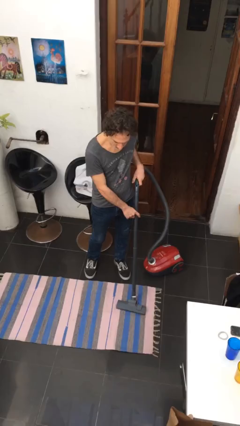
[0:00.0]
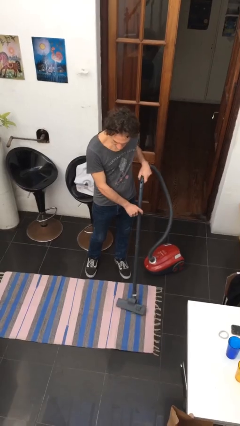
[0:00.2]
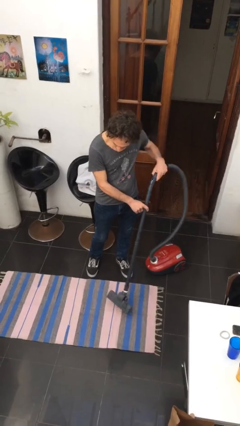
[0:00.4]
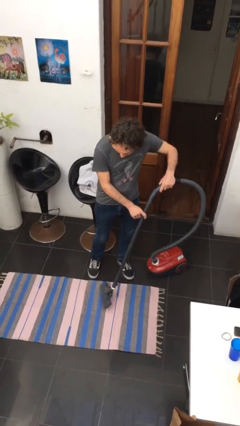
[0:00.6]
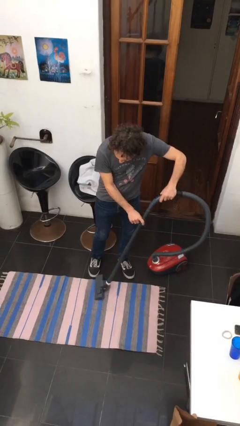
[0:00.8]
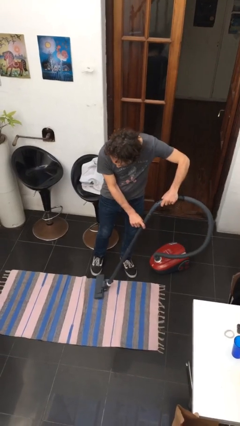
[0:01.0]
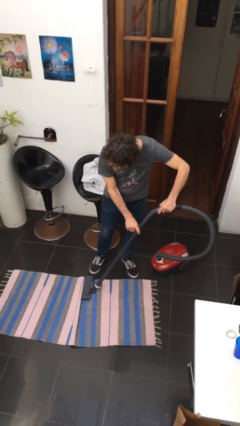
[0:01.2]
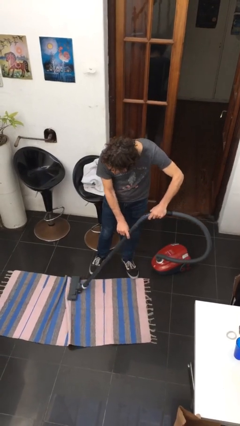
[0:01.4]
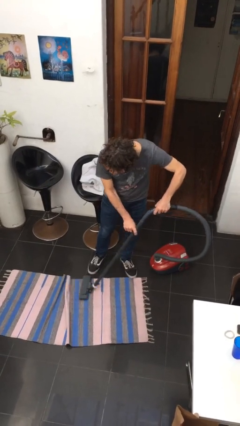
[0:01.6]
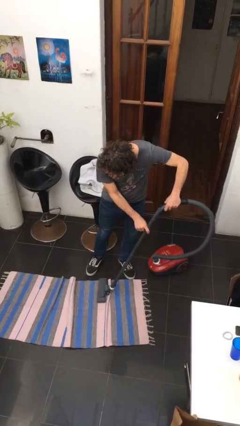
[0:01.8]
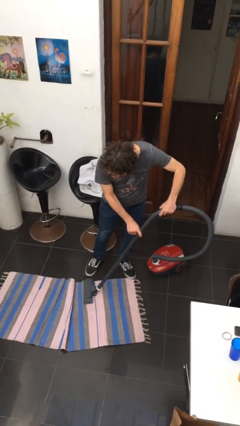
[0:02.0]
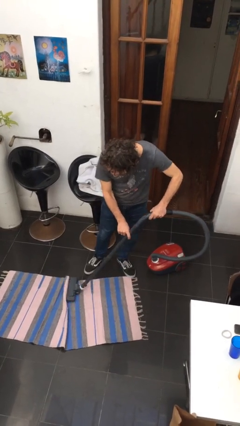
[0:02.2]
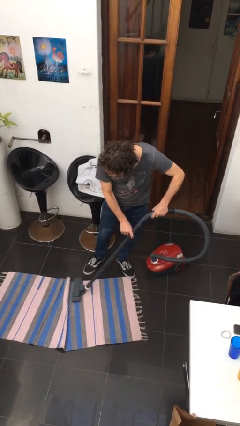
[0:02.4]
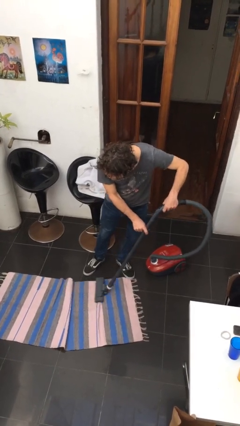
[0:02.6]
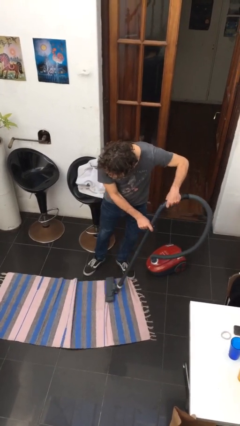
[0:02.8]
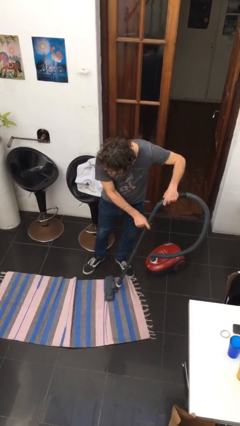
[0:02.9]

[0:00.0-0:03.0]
person vacuums carpet

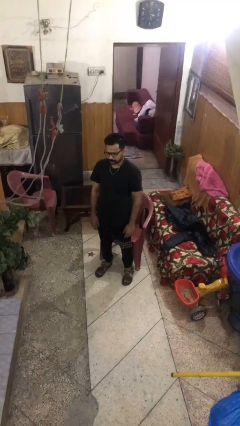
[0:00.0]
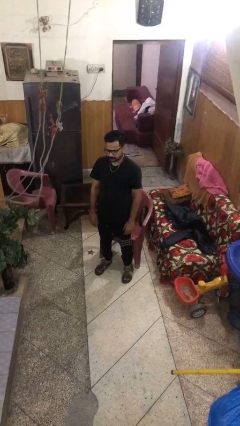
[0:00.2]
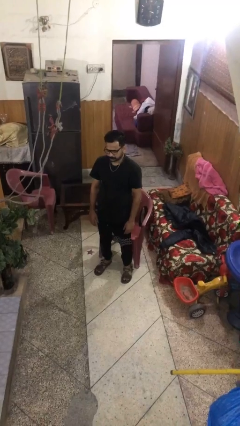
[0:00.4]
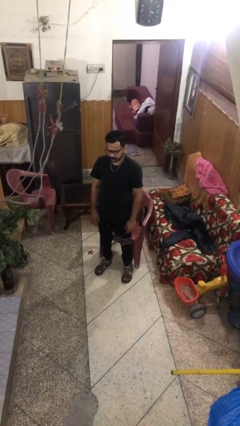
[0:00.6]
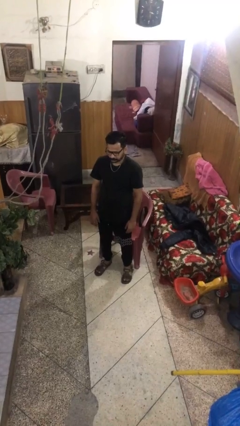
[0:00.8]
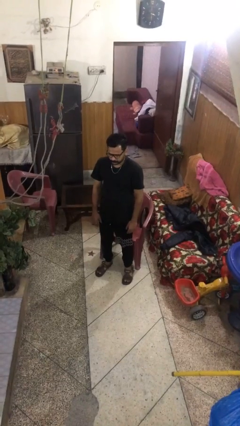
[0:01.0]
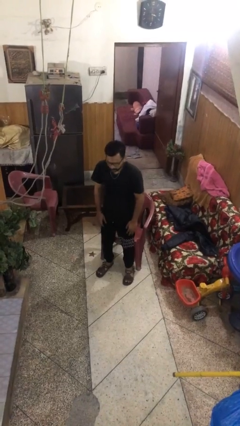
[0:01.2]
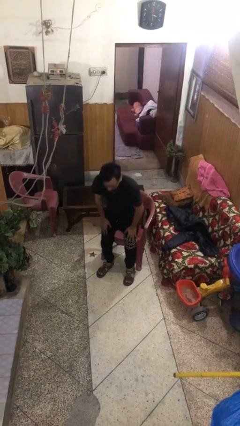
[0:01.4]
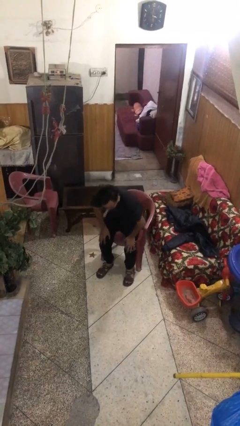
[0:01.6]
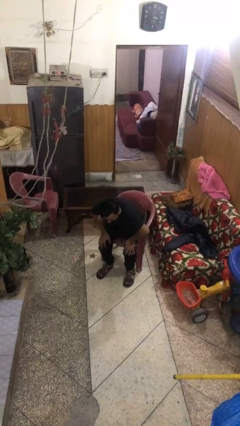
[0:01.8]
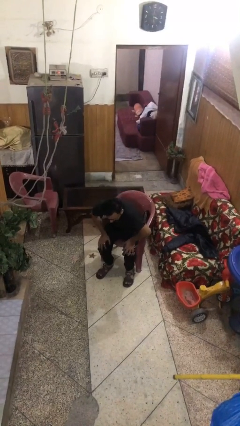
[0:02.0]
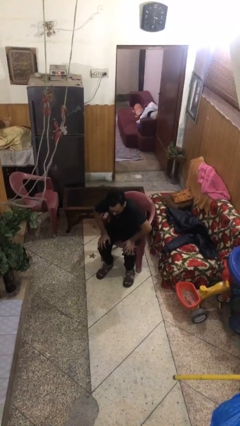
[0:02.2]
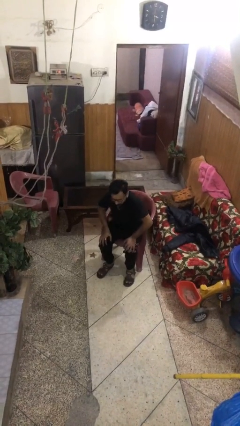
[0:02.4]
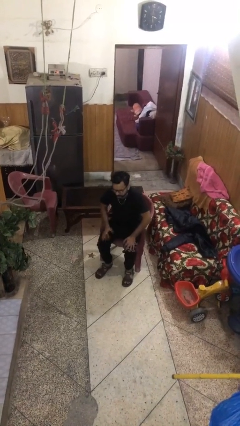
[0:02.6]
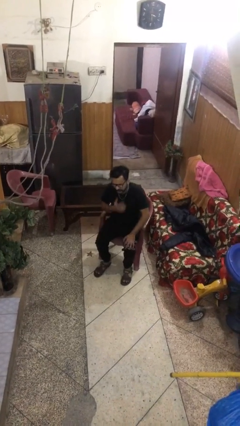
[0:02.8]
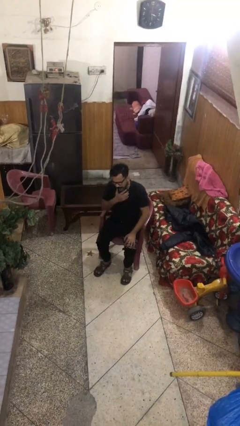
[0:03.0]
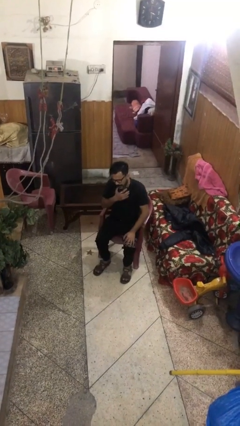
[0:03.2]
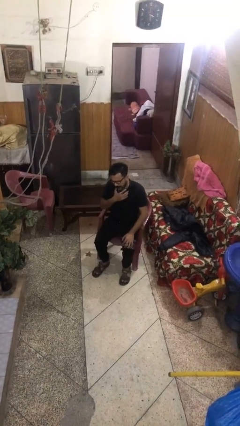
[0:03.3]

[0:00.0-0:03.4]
person sits down

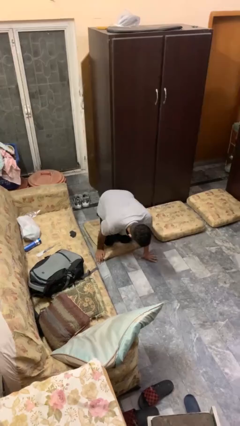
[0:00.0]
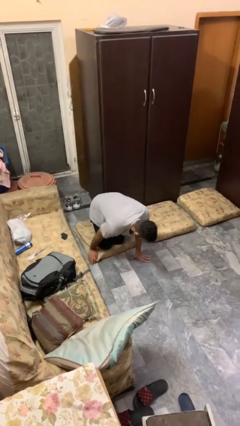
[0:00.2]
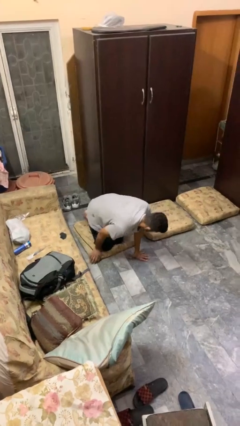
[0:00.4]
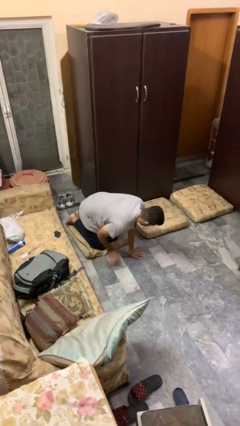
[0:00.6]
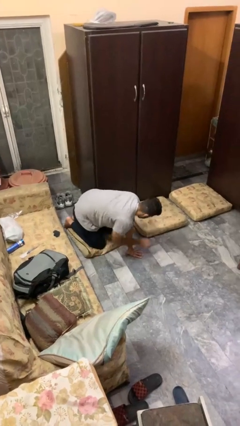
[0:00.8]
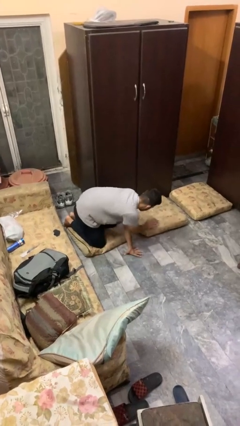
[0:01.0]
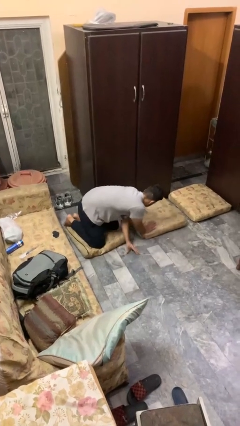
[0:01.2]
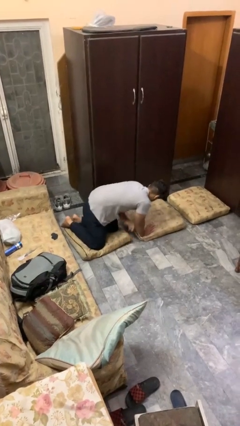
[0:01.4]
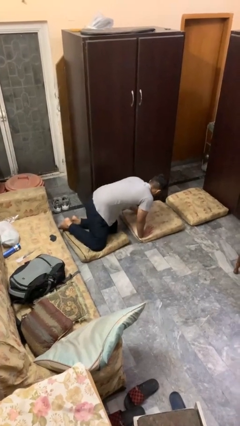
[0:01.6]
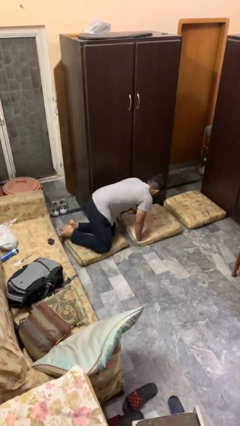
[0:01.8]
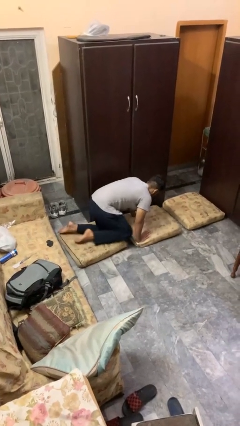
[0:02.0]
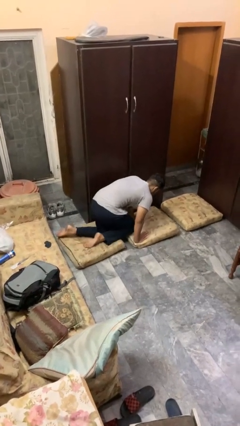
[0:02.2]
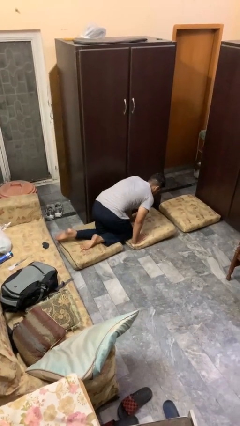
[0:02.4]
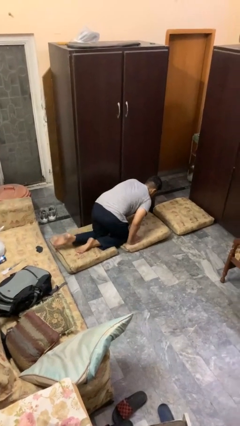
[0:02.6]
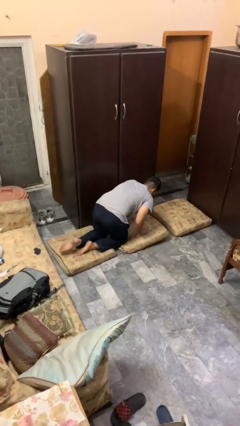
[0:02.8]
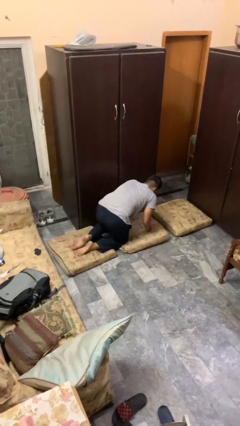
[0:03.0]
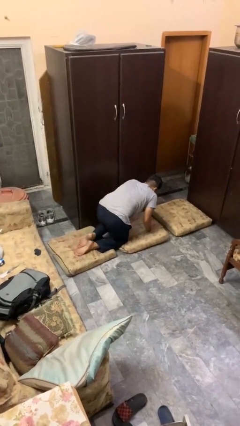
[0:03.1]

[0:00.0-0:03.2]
person crawls

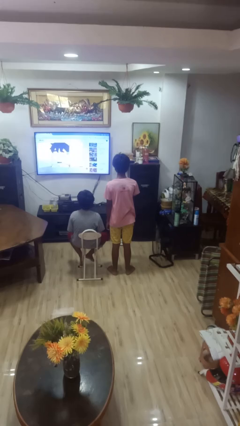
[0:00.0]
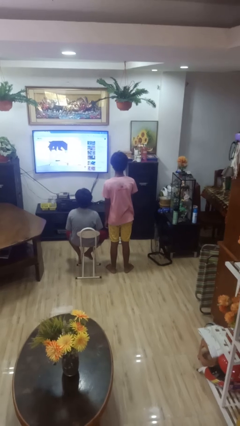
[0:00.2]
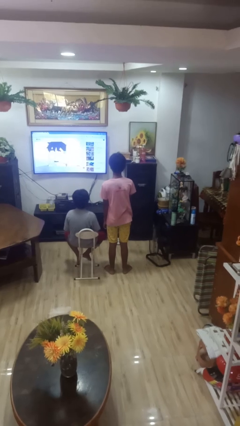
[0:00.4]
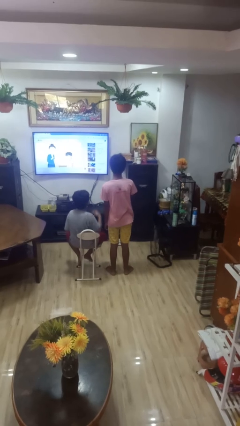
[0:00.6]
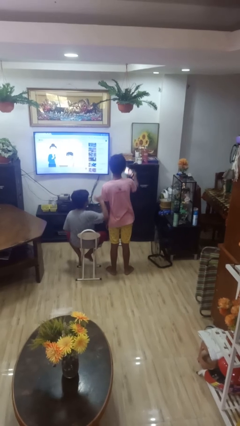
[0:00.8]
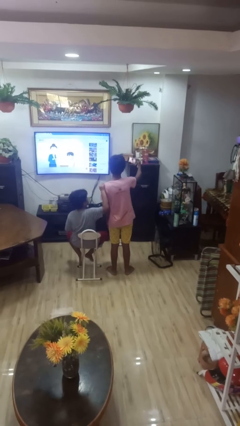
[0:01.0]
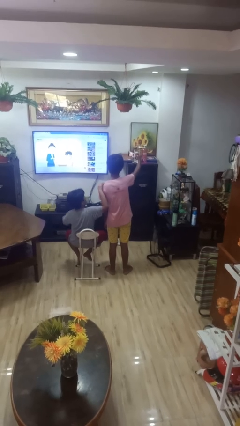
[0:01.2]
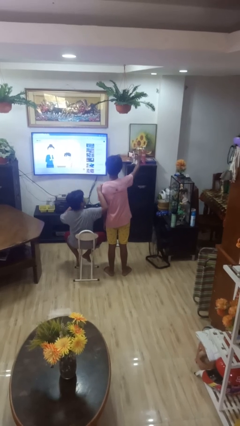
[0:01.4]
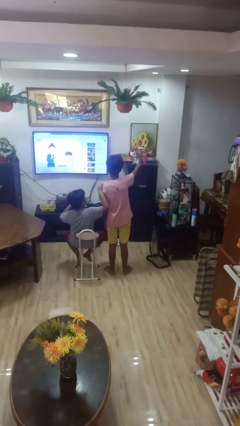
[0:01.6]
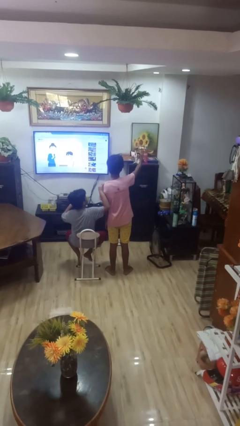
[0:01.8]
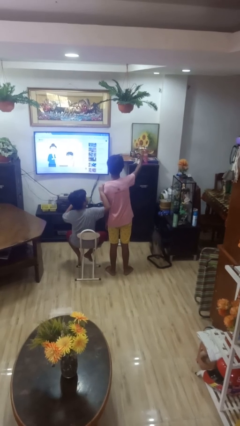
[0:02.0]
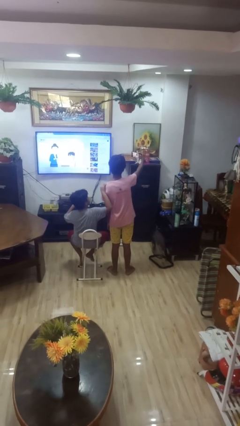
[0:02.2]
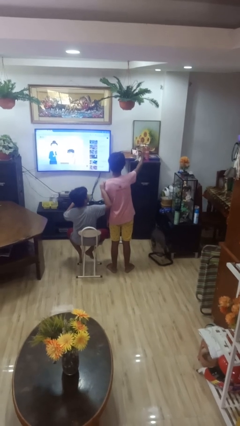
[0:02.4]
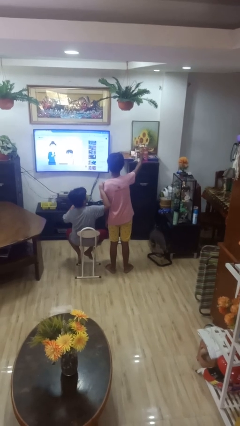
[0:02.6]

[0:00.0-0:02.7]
person takes selfie with person

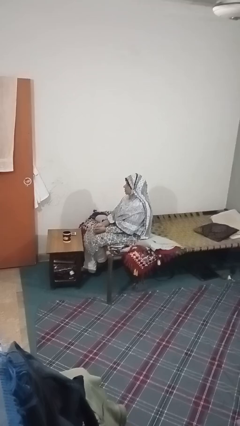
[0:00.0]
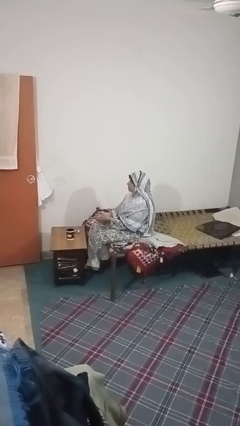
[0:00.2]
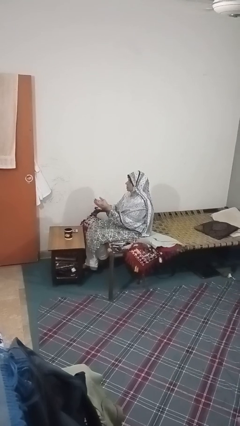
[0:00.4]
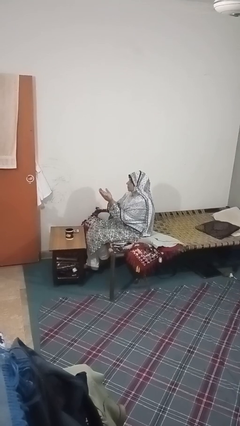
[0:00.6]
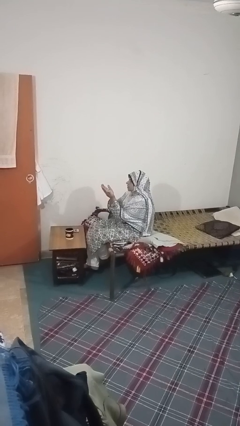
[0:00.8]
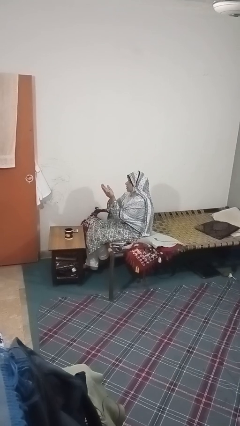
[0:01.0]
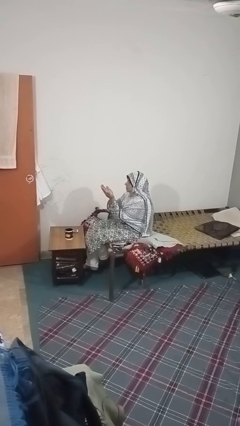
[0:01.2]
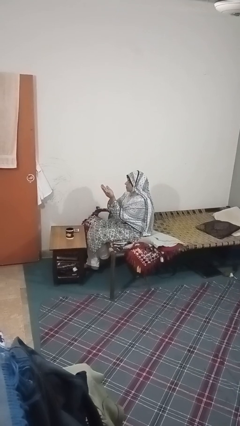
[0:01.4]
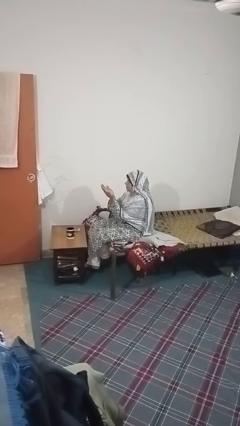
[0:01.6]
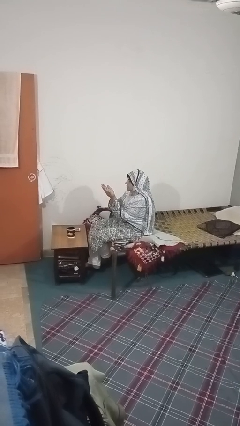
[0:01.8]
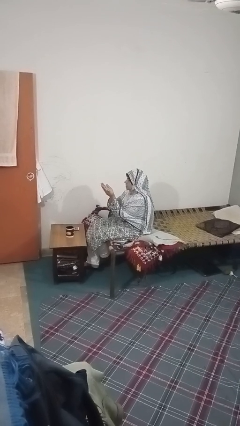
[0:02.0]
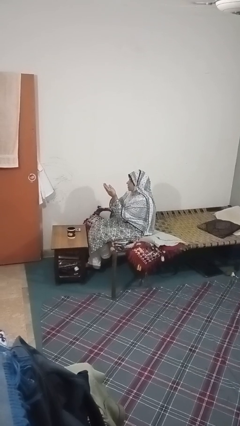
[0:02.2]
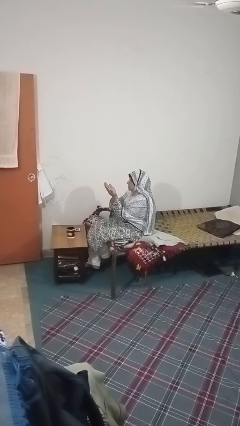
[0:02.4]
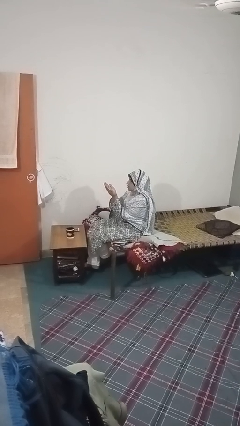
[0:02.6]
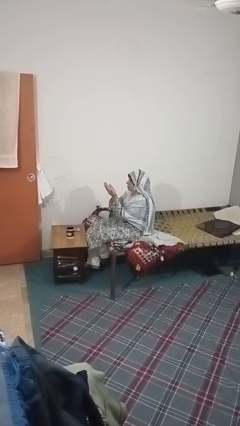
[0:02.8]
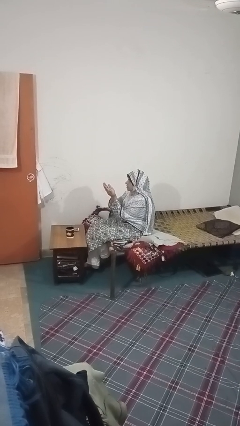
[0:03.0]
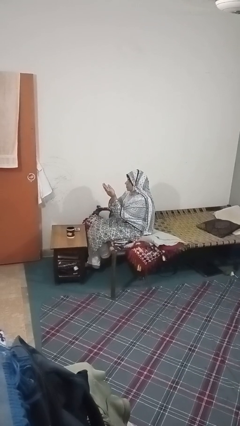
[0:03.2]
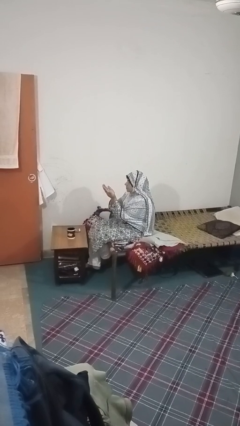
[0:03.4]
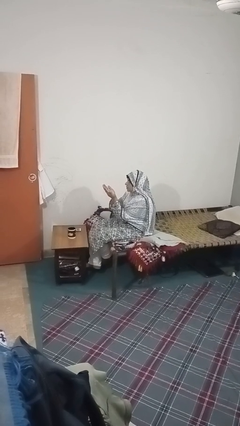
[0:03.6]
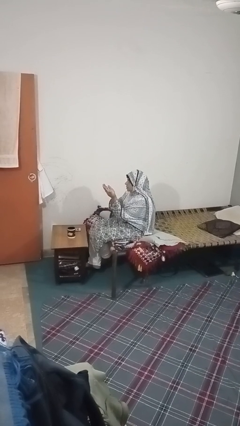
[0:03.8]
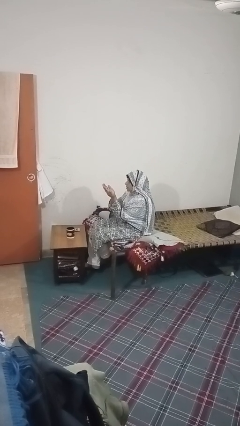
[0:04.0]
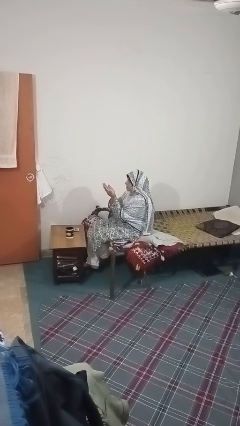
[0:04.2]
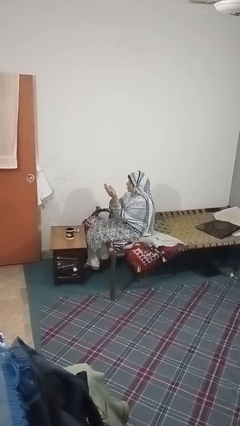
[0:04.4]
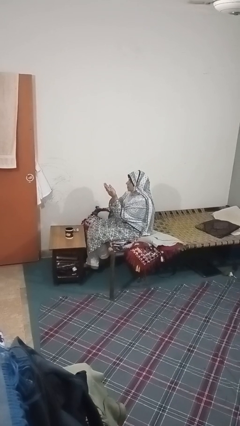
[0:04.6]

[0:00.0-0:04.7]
person prays

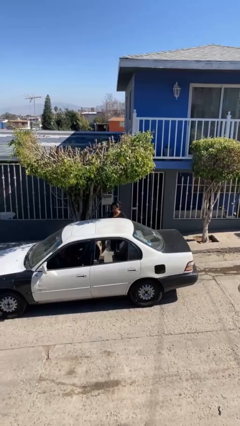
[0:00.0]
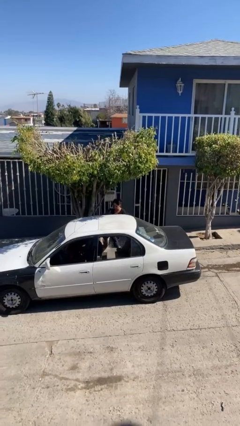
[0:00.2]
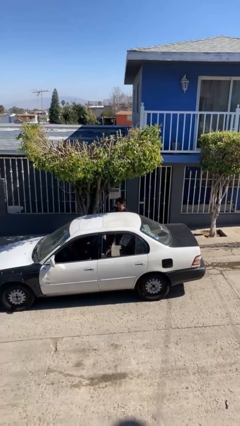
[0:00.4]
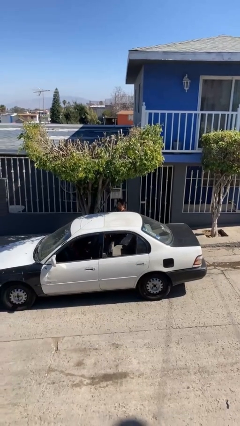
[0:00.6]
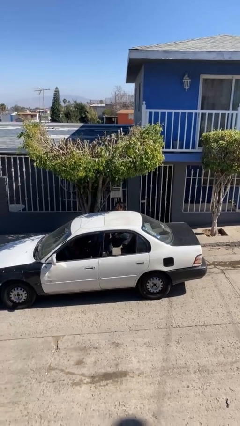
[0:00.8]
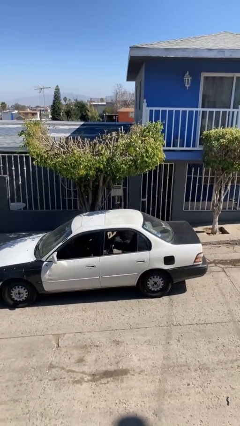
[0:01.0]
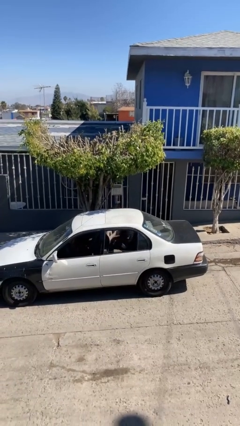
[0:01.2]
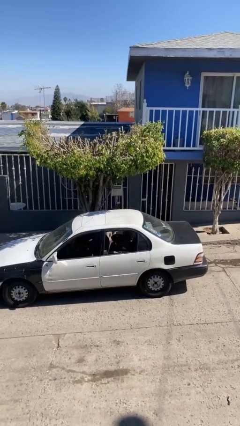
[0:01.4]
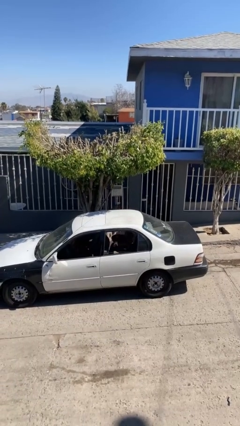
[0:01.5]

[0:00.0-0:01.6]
person enters car
